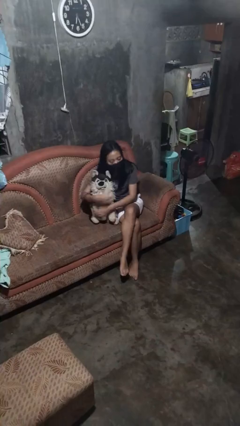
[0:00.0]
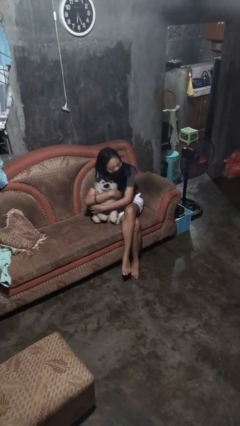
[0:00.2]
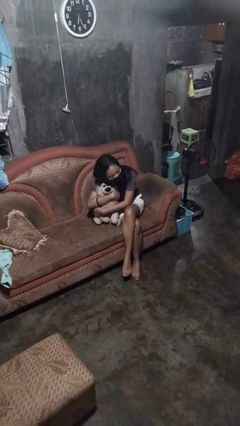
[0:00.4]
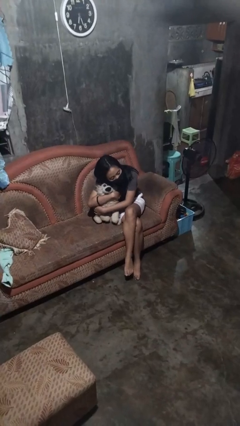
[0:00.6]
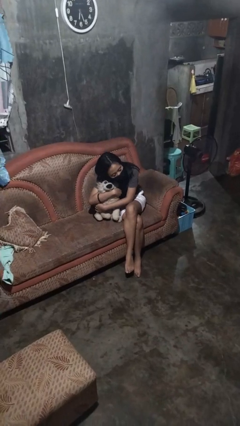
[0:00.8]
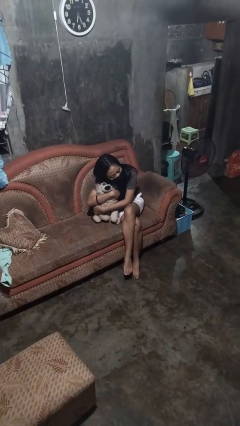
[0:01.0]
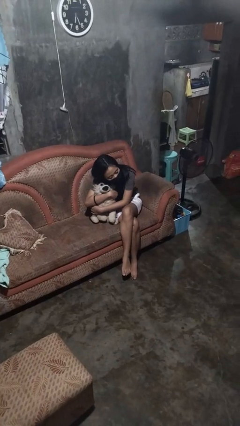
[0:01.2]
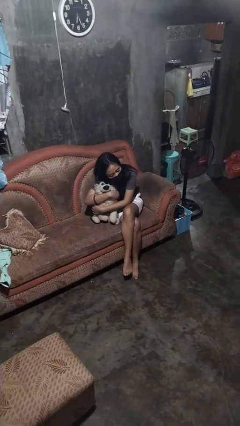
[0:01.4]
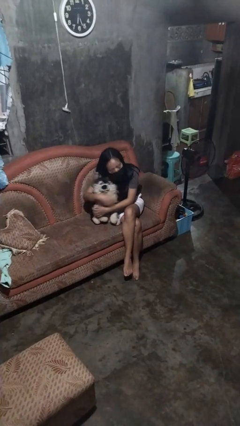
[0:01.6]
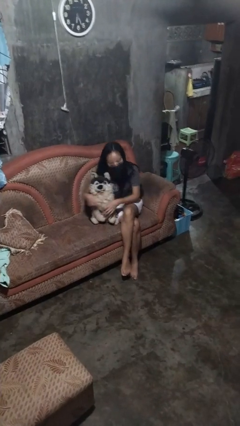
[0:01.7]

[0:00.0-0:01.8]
person hugs stuffed animal

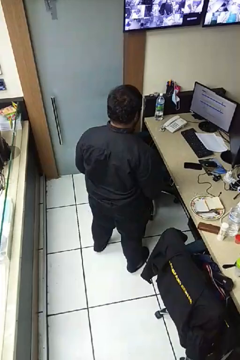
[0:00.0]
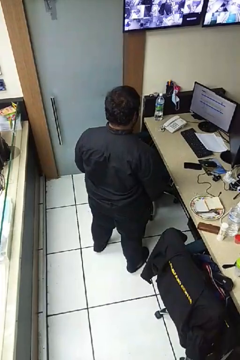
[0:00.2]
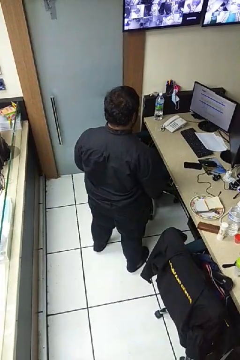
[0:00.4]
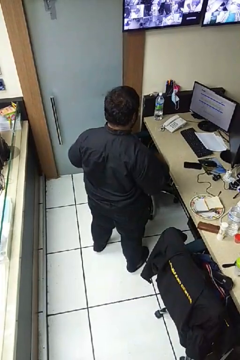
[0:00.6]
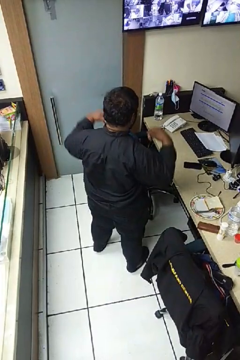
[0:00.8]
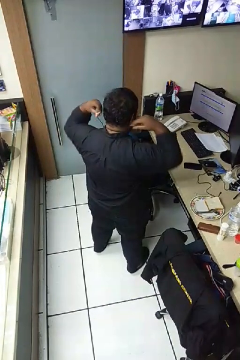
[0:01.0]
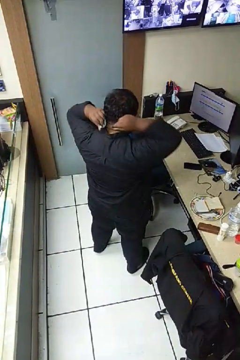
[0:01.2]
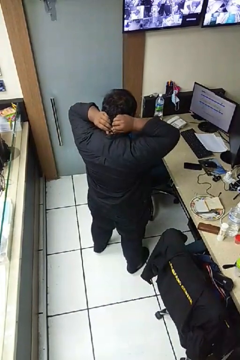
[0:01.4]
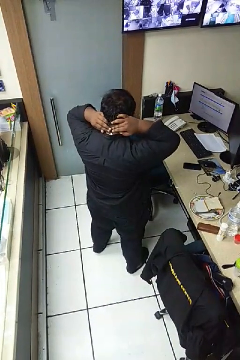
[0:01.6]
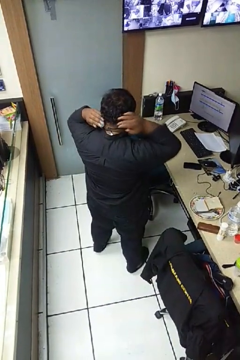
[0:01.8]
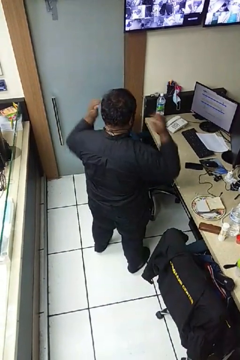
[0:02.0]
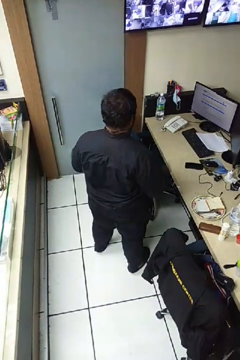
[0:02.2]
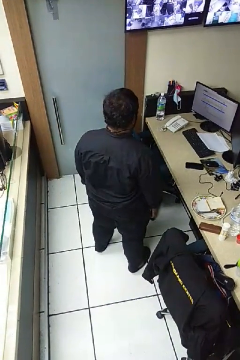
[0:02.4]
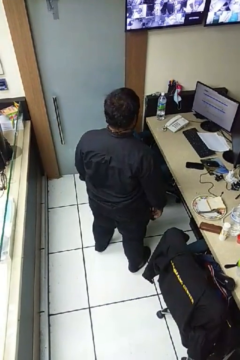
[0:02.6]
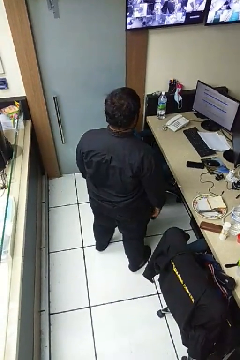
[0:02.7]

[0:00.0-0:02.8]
person puts on necklace

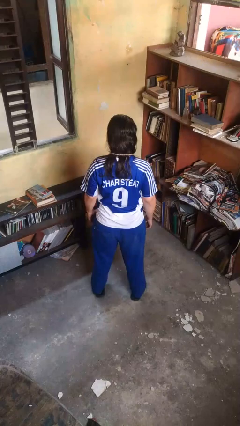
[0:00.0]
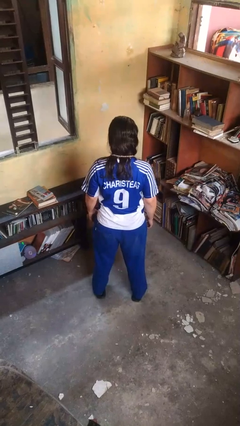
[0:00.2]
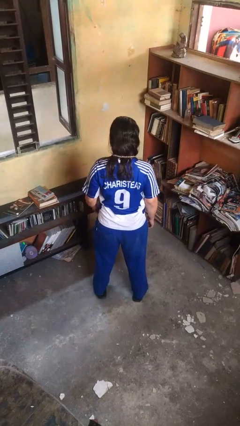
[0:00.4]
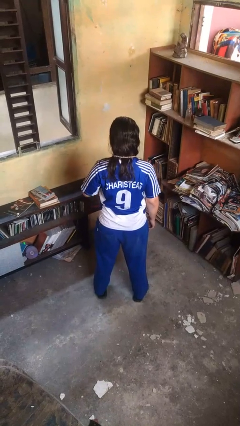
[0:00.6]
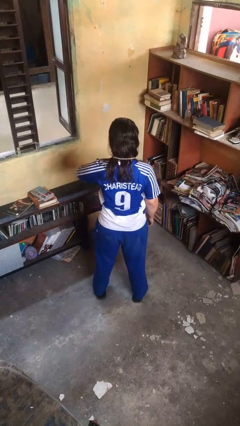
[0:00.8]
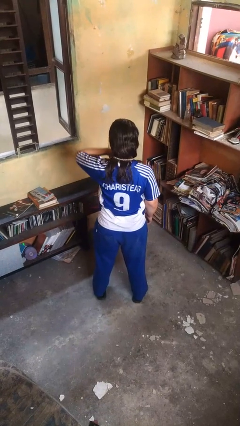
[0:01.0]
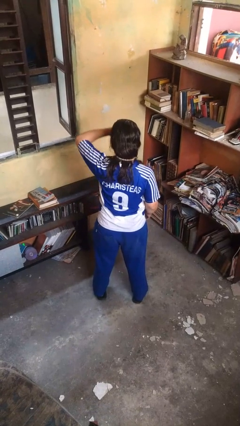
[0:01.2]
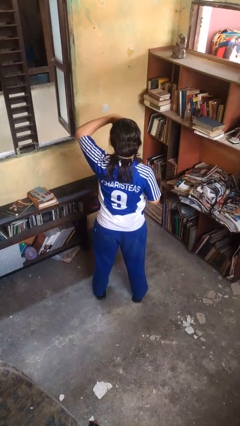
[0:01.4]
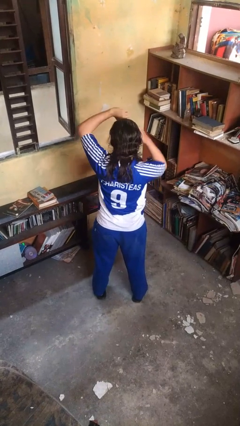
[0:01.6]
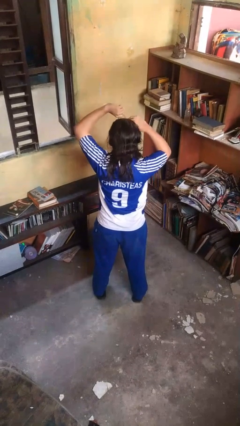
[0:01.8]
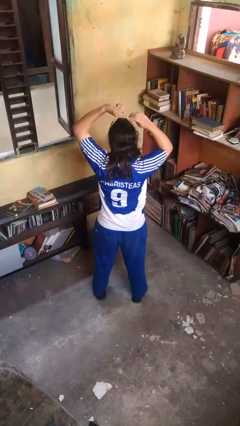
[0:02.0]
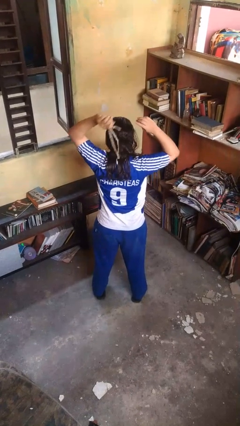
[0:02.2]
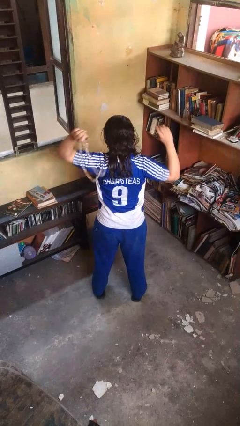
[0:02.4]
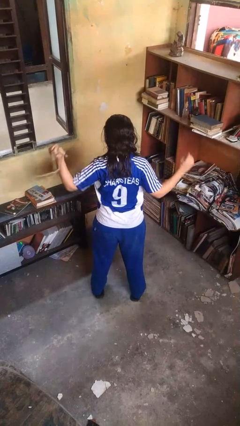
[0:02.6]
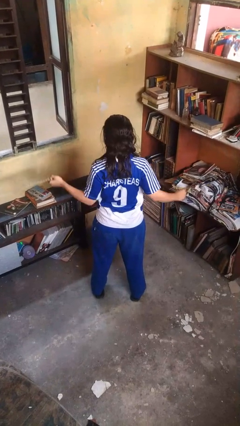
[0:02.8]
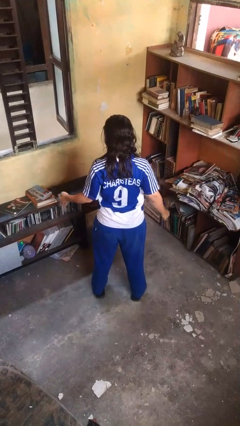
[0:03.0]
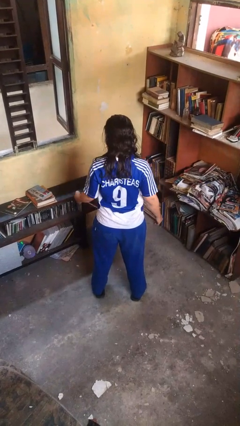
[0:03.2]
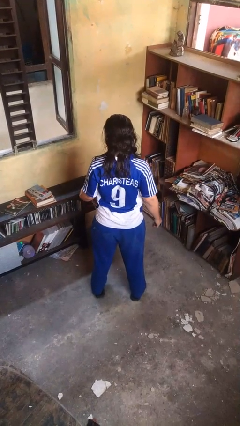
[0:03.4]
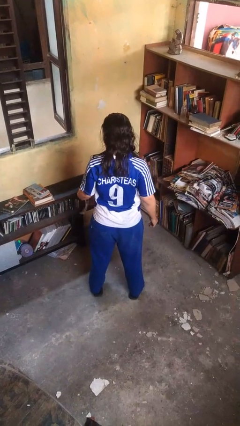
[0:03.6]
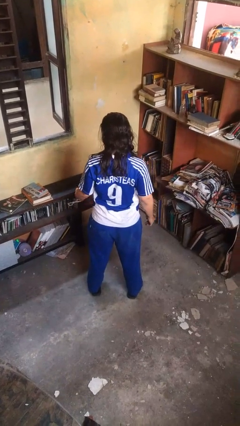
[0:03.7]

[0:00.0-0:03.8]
person takes off necklace

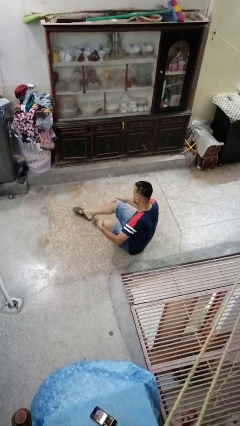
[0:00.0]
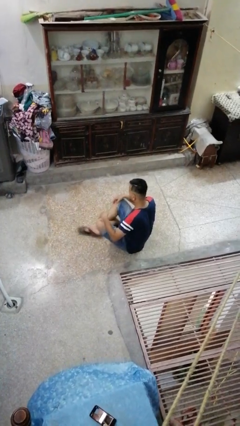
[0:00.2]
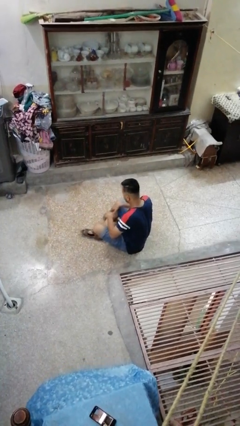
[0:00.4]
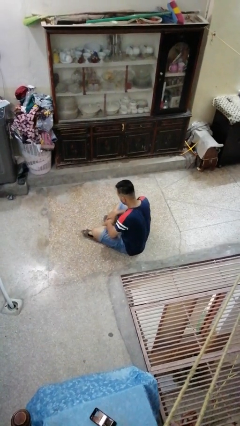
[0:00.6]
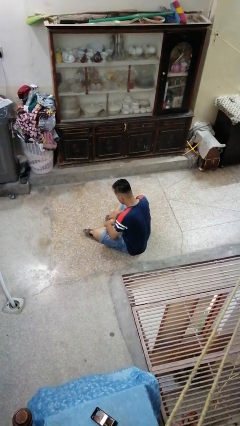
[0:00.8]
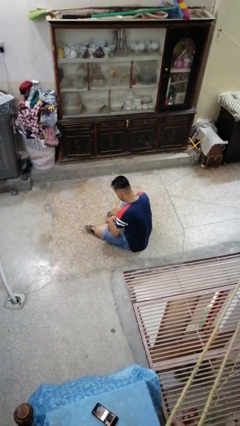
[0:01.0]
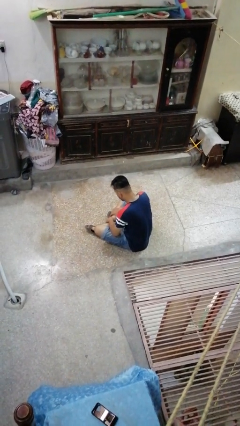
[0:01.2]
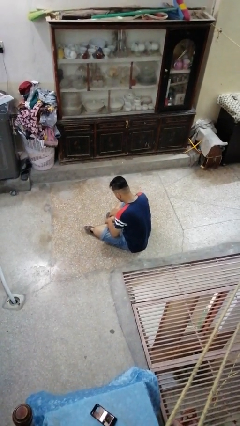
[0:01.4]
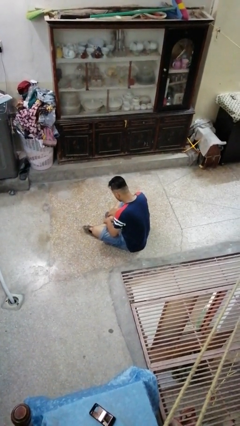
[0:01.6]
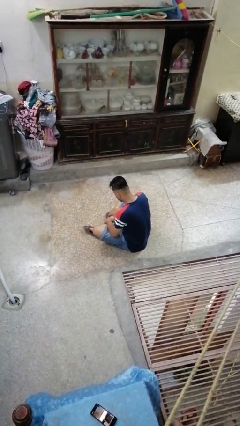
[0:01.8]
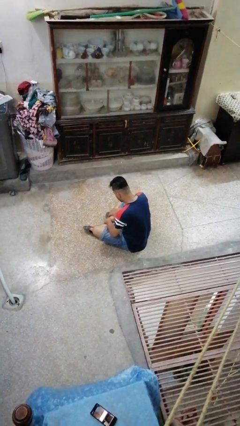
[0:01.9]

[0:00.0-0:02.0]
person crosses legs

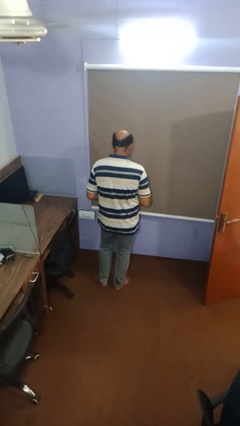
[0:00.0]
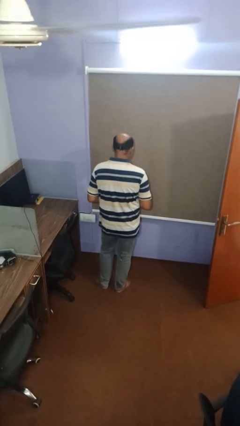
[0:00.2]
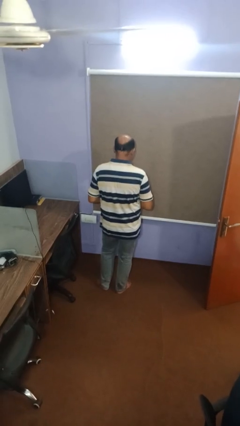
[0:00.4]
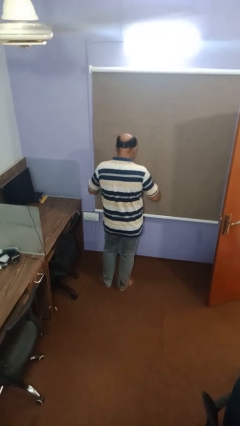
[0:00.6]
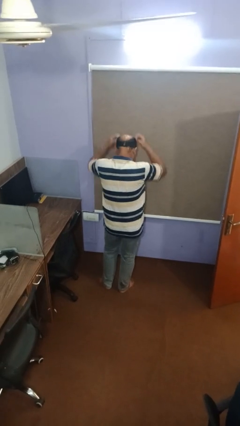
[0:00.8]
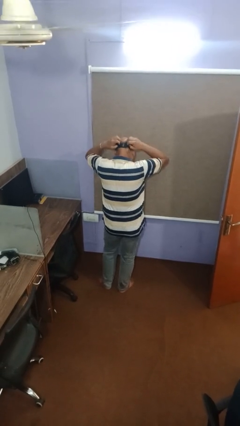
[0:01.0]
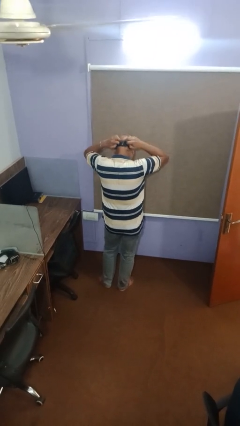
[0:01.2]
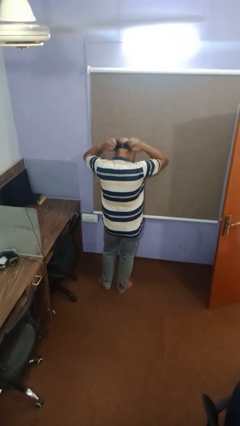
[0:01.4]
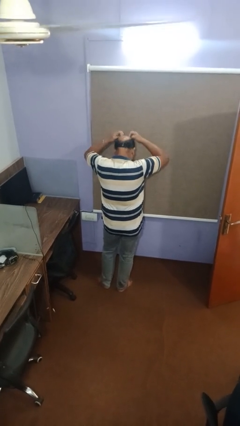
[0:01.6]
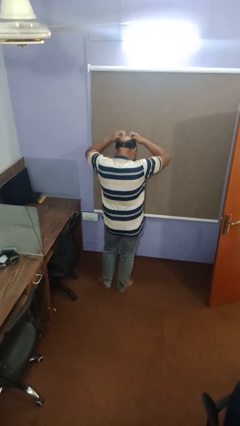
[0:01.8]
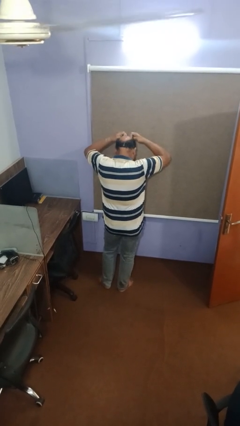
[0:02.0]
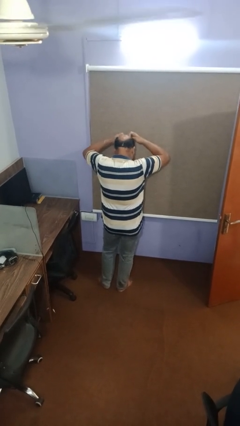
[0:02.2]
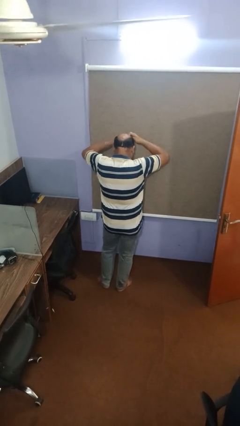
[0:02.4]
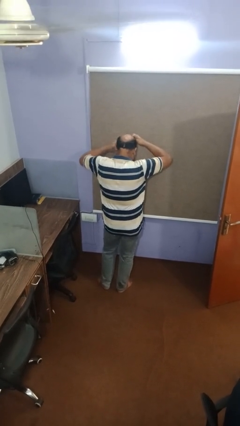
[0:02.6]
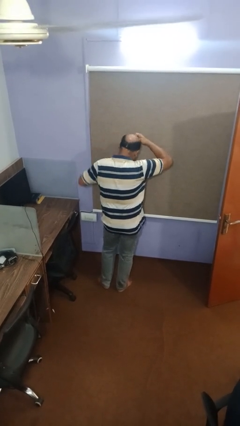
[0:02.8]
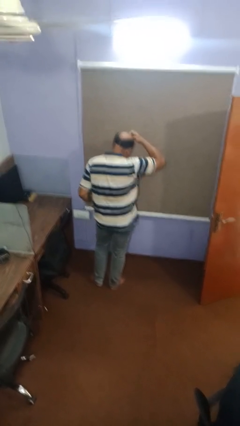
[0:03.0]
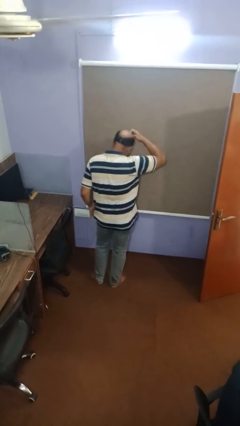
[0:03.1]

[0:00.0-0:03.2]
person scratches face

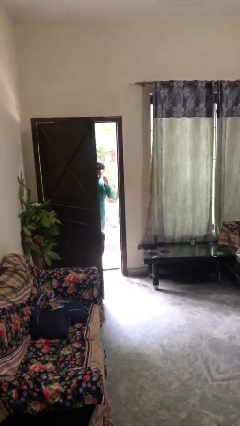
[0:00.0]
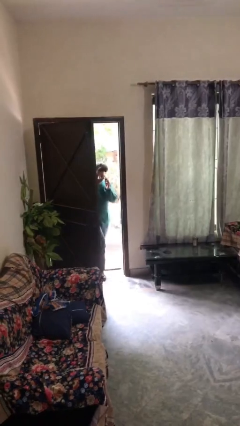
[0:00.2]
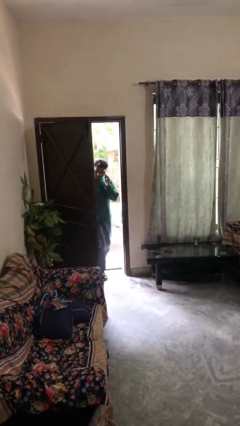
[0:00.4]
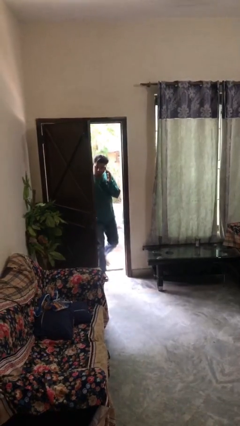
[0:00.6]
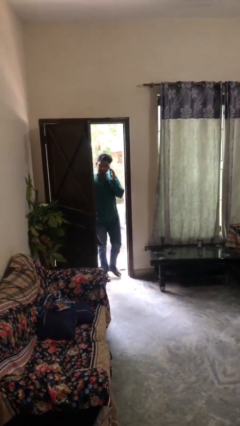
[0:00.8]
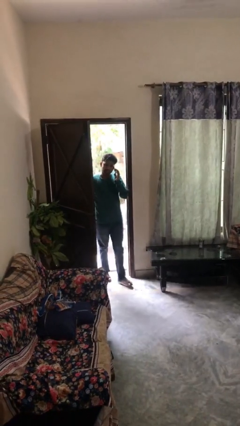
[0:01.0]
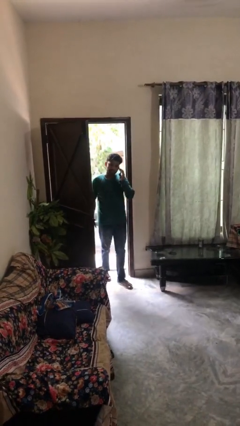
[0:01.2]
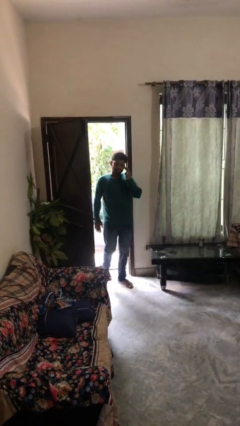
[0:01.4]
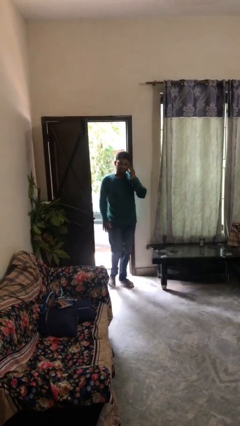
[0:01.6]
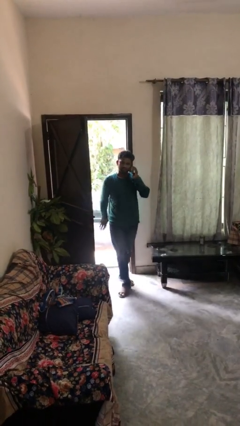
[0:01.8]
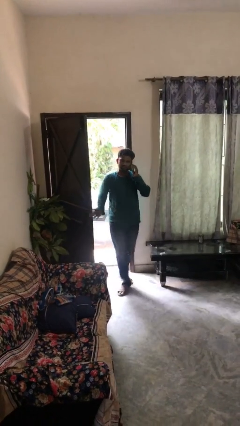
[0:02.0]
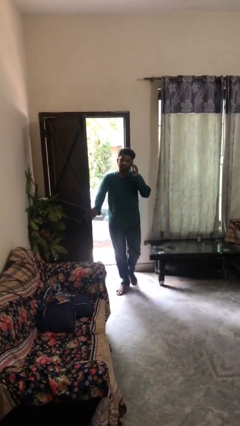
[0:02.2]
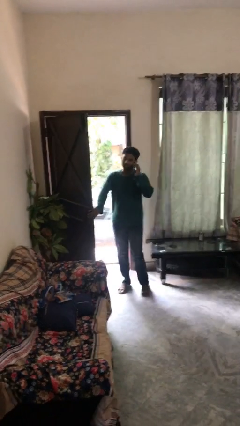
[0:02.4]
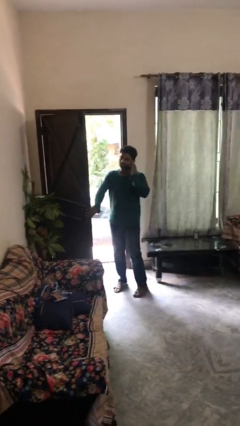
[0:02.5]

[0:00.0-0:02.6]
person enters scene through structure

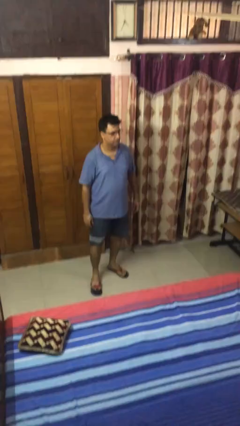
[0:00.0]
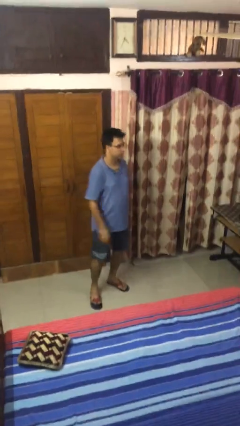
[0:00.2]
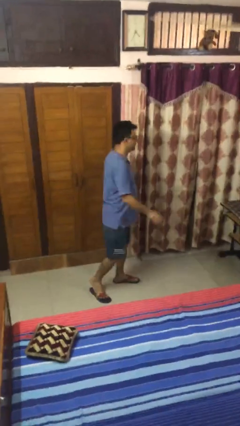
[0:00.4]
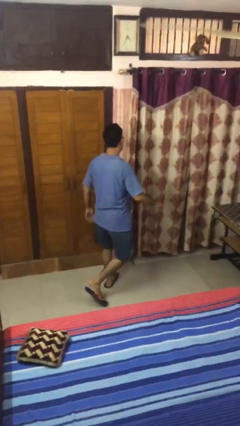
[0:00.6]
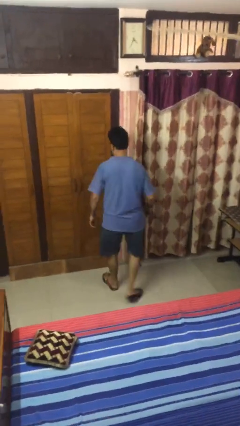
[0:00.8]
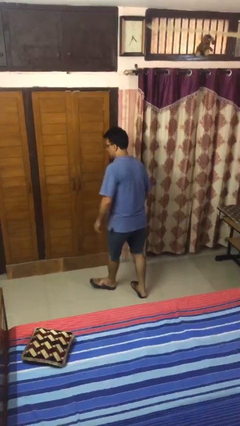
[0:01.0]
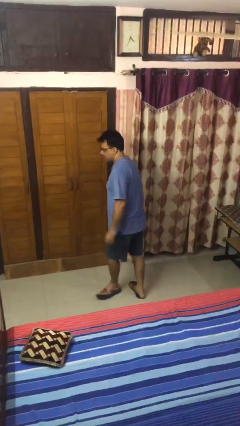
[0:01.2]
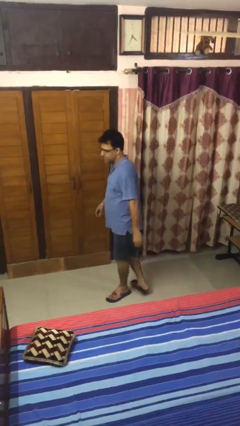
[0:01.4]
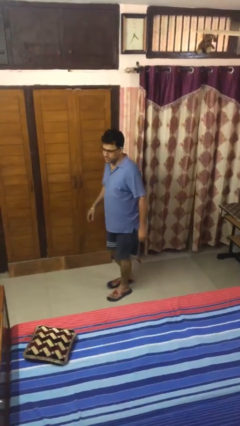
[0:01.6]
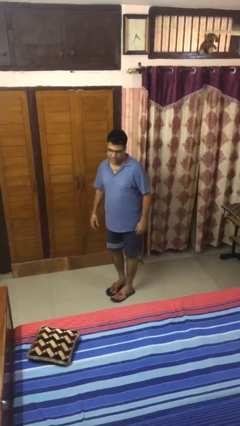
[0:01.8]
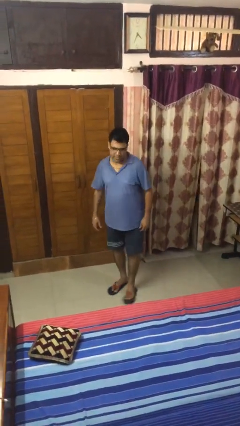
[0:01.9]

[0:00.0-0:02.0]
person twirls
